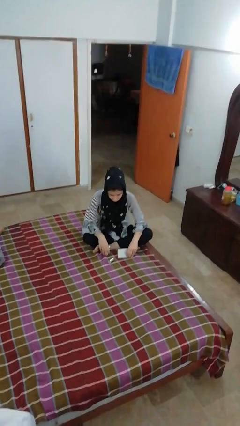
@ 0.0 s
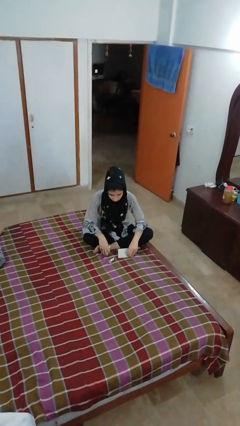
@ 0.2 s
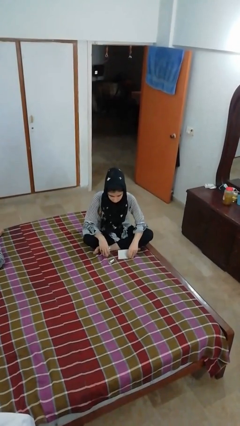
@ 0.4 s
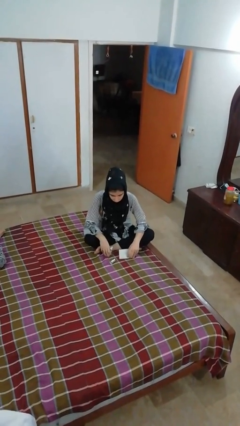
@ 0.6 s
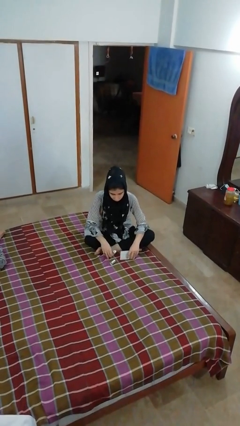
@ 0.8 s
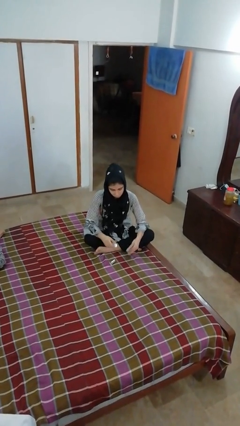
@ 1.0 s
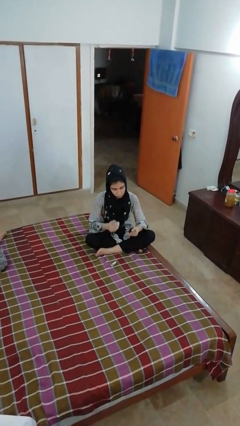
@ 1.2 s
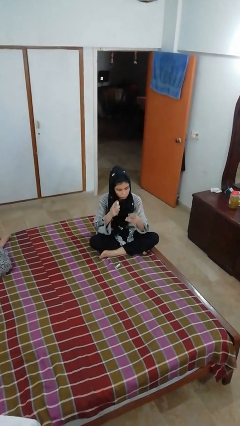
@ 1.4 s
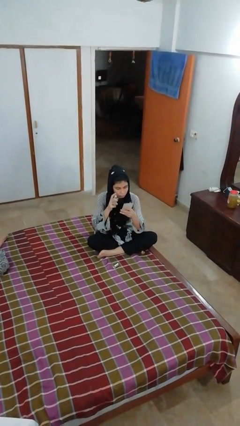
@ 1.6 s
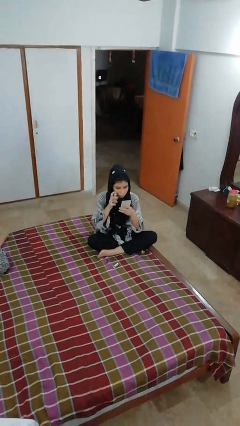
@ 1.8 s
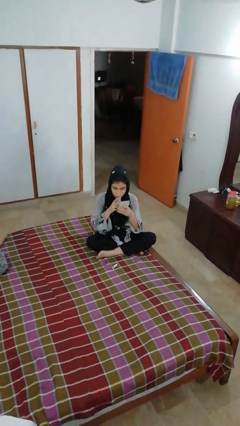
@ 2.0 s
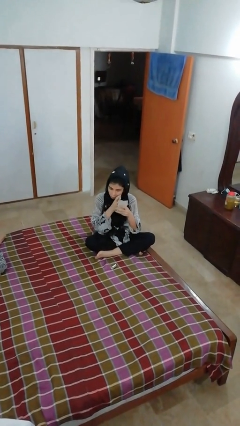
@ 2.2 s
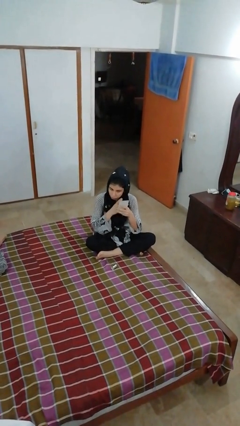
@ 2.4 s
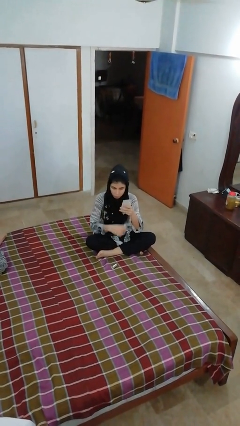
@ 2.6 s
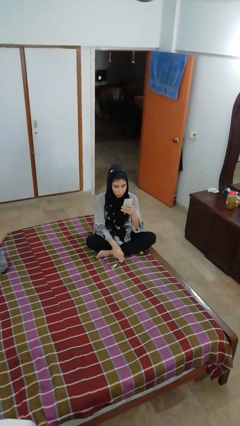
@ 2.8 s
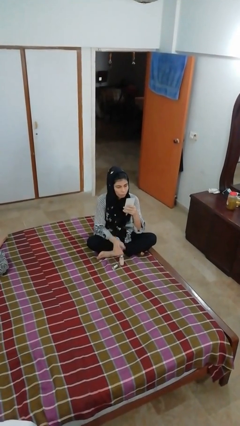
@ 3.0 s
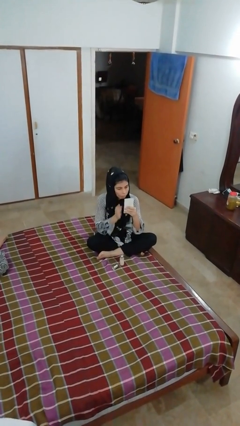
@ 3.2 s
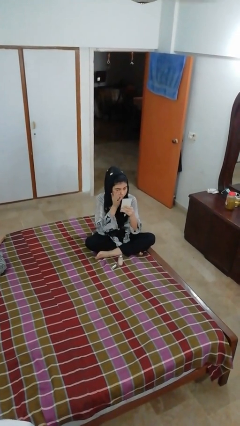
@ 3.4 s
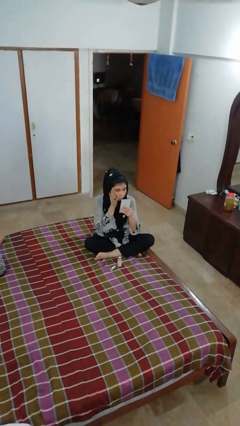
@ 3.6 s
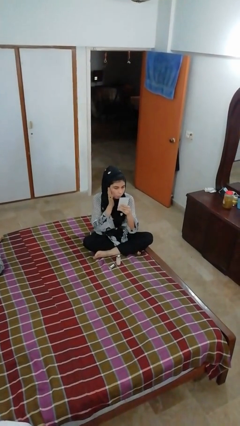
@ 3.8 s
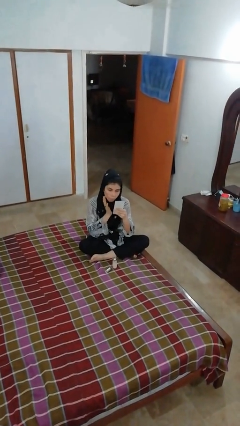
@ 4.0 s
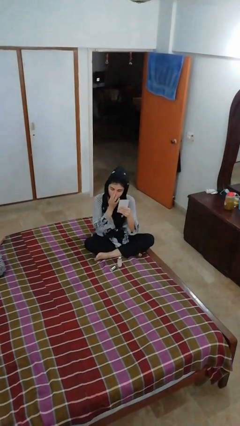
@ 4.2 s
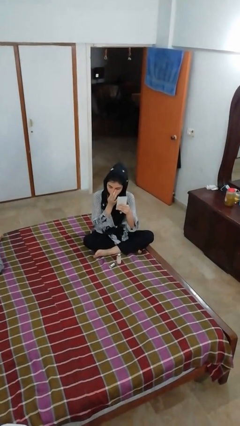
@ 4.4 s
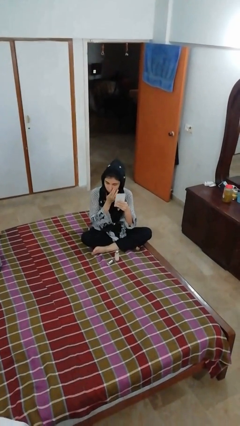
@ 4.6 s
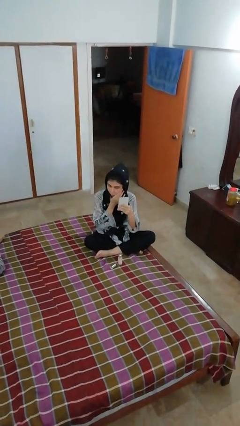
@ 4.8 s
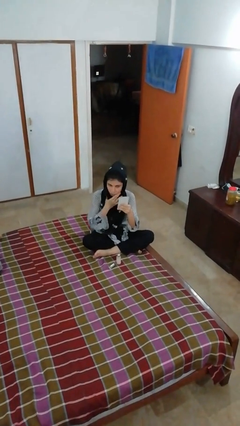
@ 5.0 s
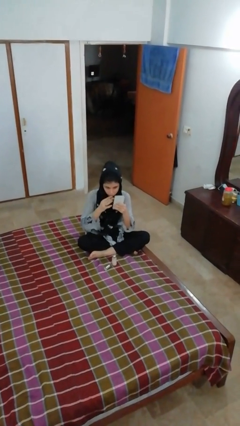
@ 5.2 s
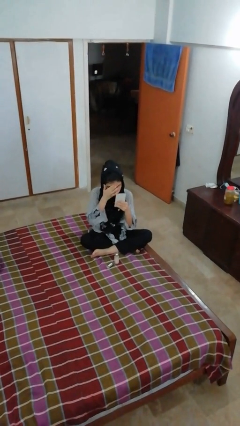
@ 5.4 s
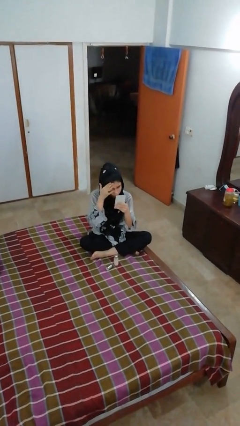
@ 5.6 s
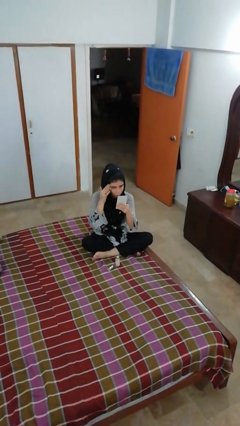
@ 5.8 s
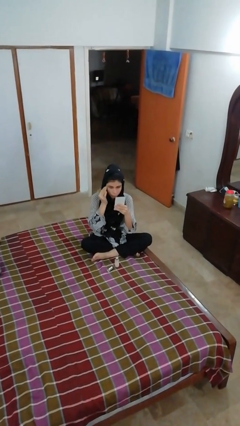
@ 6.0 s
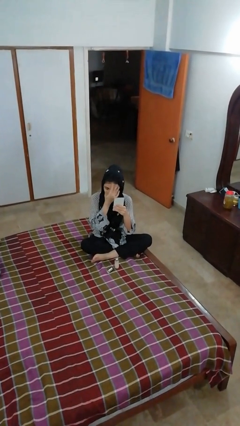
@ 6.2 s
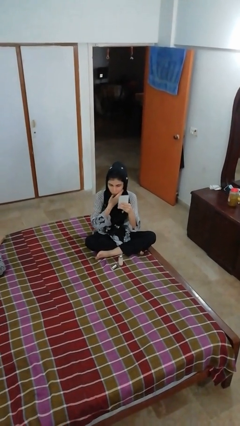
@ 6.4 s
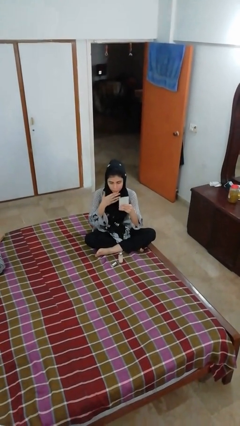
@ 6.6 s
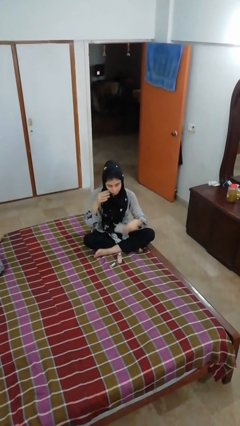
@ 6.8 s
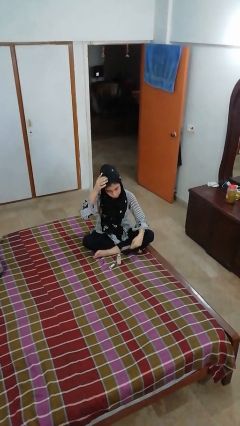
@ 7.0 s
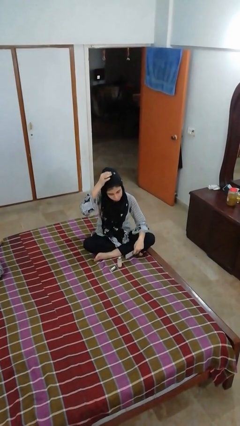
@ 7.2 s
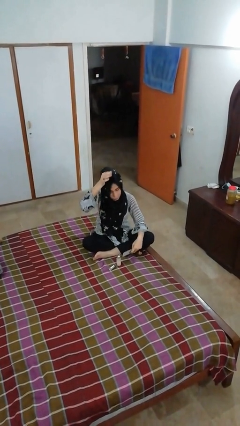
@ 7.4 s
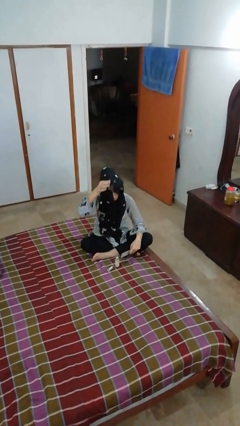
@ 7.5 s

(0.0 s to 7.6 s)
person applies foundation makeup

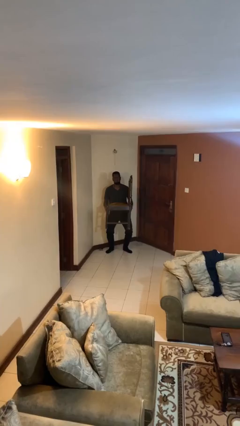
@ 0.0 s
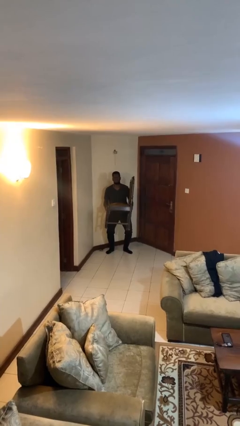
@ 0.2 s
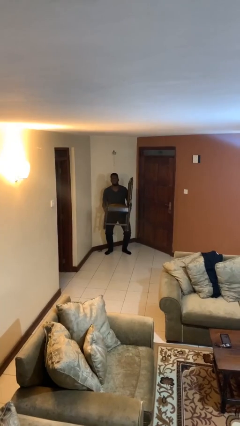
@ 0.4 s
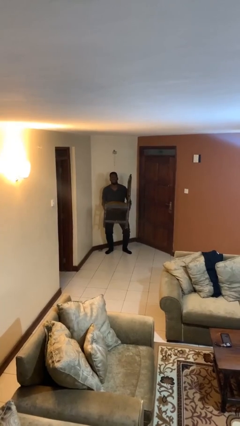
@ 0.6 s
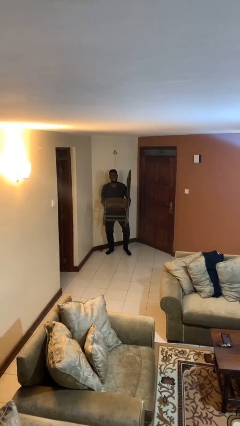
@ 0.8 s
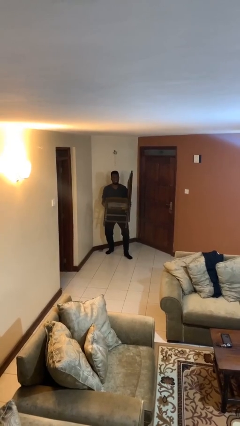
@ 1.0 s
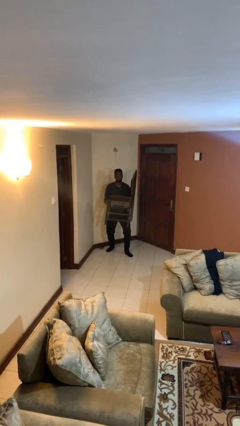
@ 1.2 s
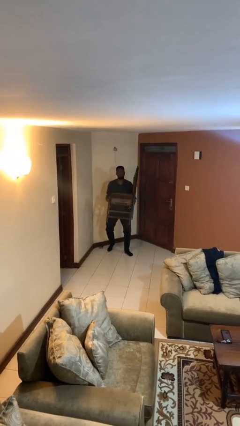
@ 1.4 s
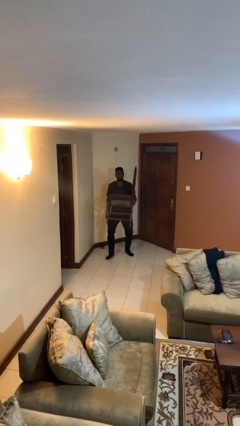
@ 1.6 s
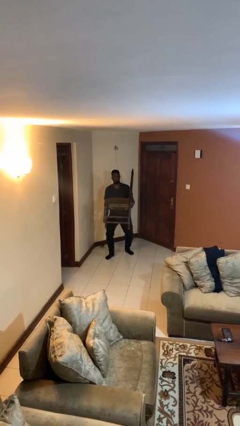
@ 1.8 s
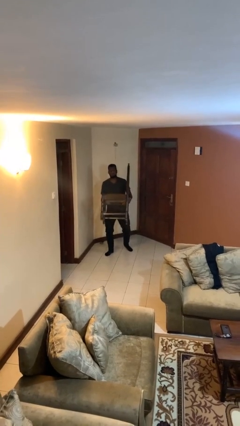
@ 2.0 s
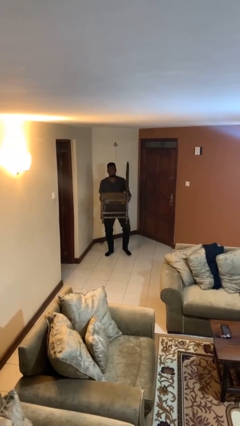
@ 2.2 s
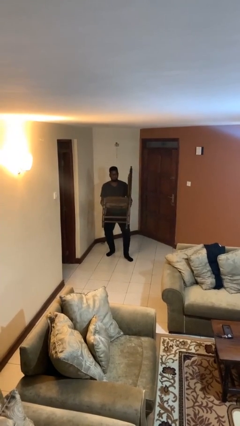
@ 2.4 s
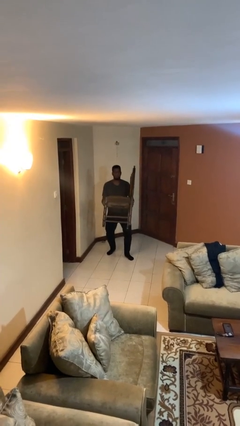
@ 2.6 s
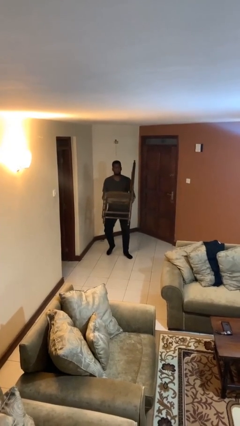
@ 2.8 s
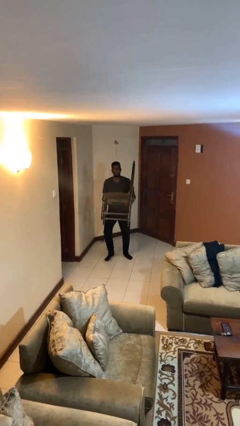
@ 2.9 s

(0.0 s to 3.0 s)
person carries heavy object

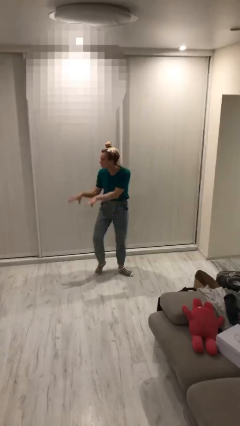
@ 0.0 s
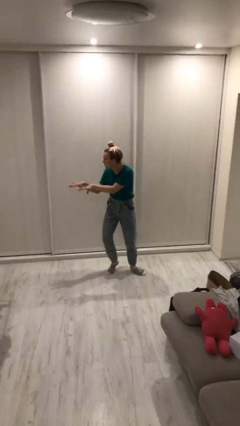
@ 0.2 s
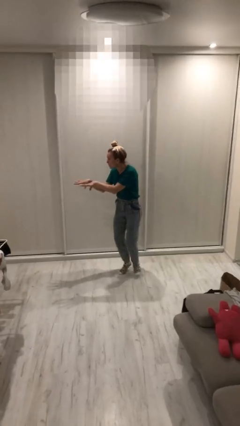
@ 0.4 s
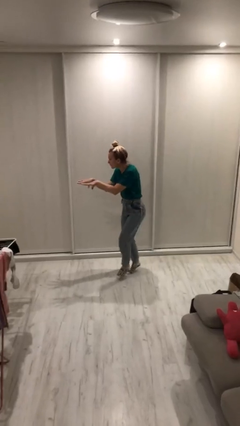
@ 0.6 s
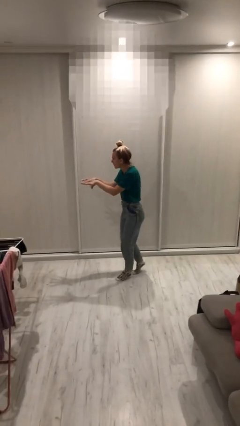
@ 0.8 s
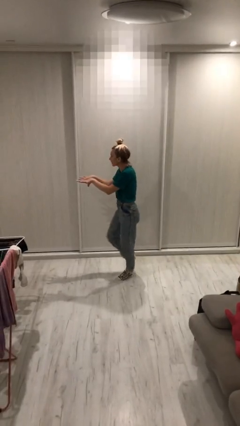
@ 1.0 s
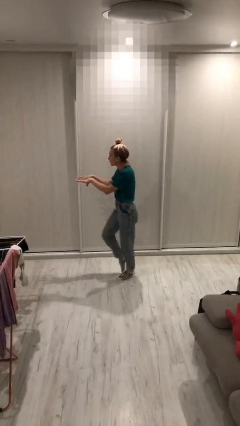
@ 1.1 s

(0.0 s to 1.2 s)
person walks tiptoe

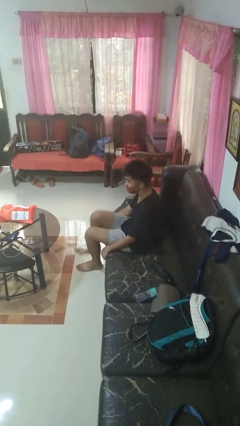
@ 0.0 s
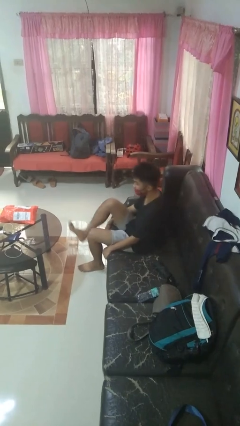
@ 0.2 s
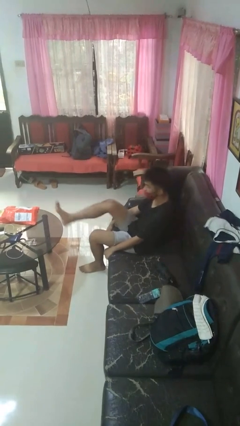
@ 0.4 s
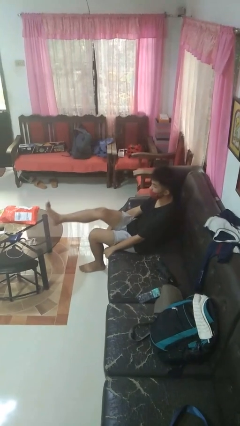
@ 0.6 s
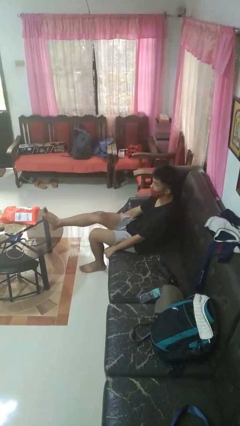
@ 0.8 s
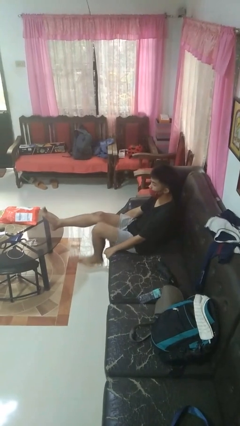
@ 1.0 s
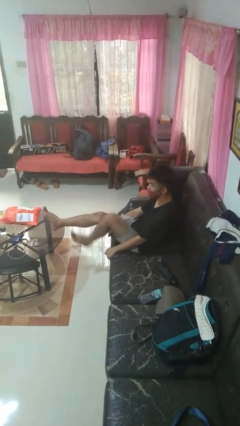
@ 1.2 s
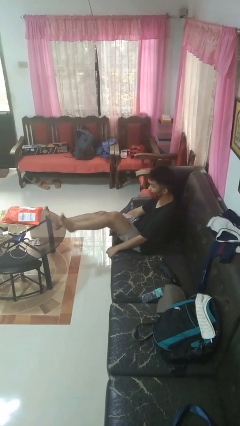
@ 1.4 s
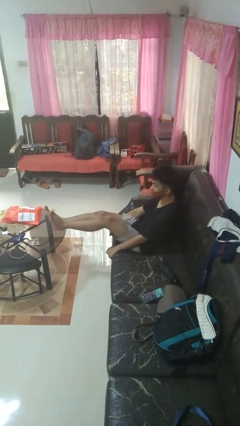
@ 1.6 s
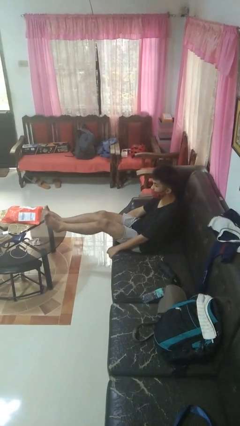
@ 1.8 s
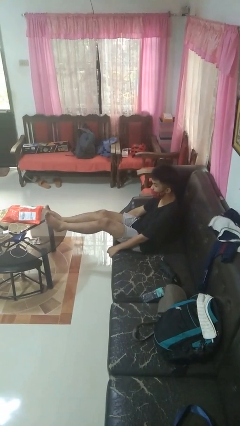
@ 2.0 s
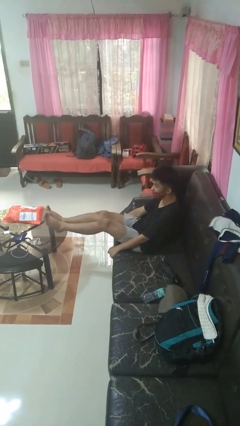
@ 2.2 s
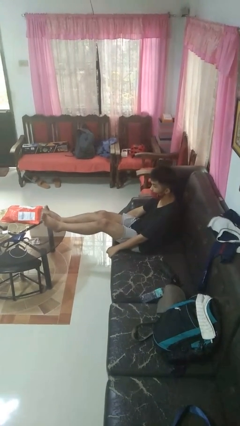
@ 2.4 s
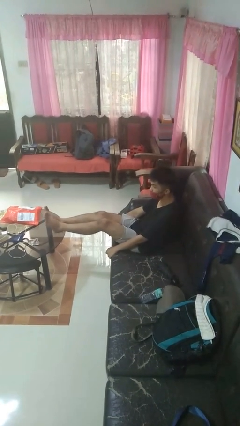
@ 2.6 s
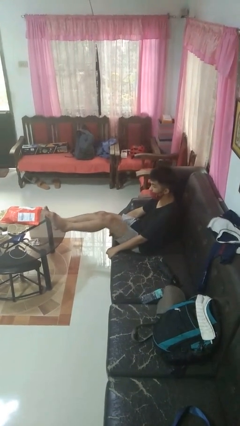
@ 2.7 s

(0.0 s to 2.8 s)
person puts feet up

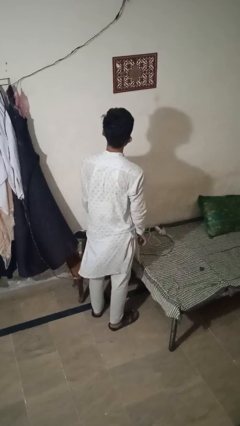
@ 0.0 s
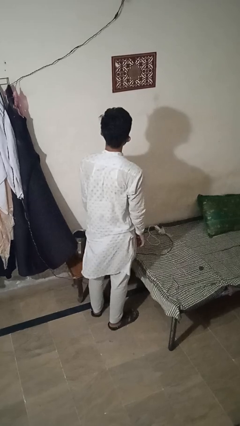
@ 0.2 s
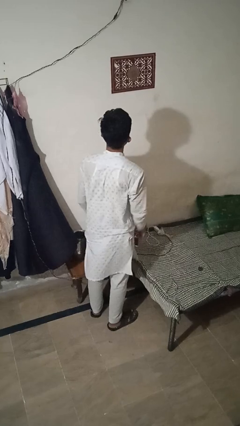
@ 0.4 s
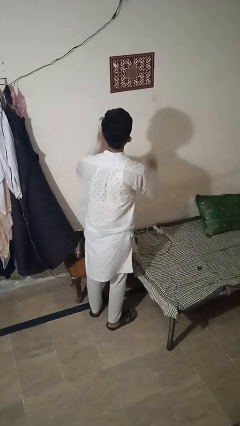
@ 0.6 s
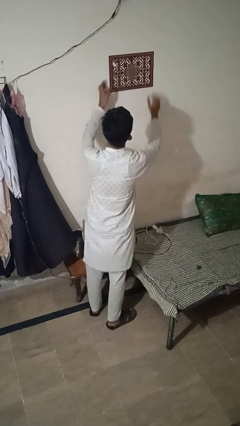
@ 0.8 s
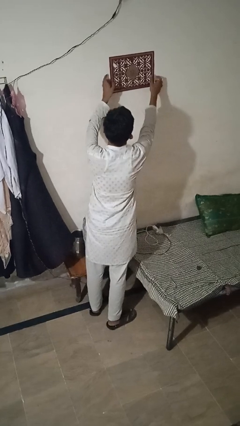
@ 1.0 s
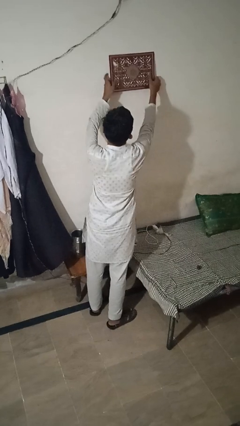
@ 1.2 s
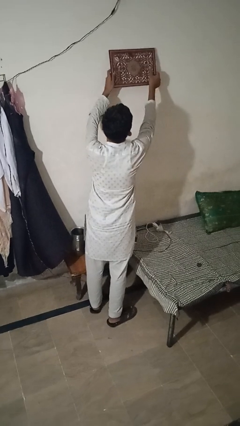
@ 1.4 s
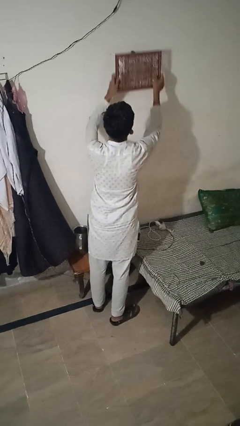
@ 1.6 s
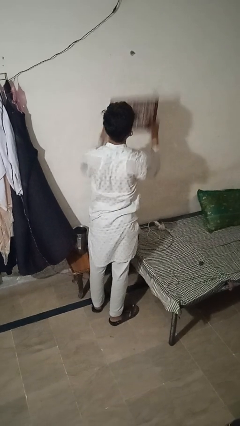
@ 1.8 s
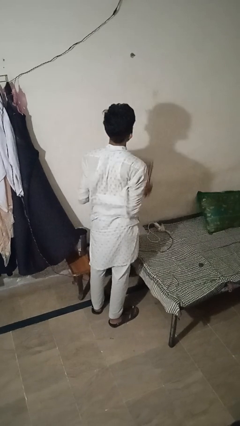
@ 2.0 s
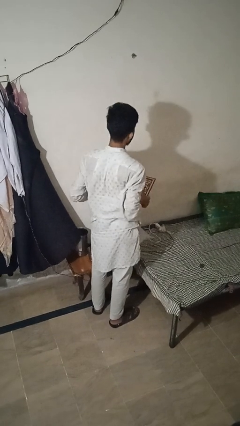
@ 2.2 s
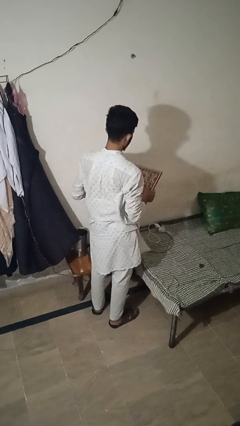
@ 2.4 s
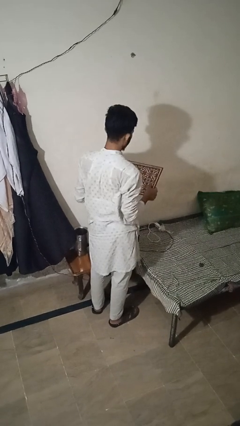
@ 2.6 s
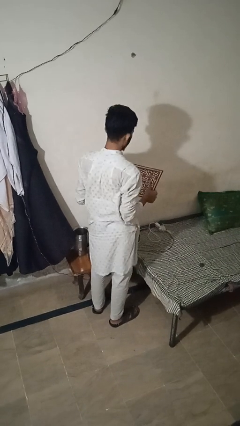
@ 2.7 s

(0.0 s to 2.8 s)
person takes down picture frame
